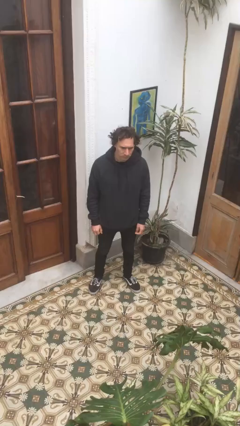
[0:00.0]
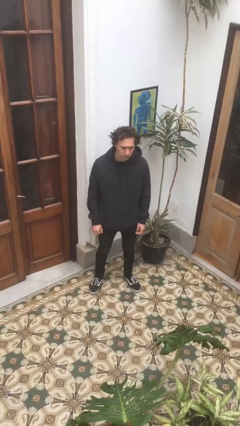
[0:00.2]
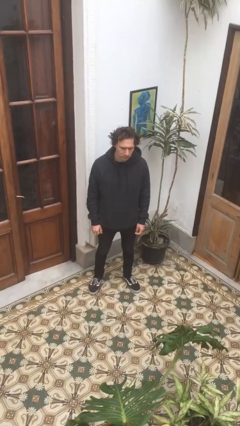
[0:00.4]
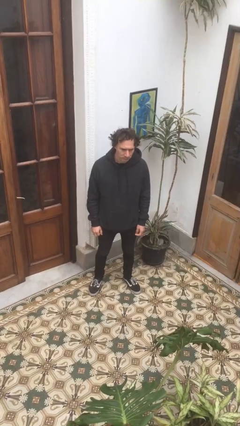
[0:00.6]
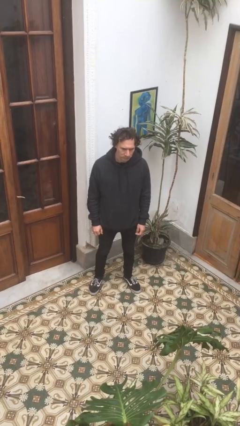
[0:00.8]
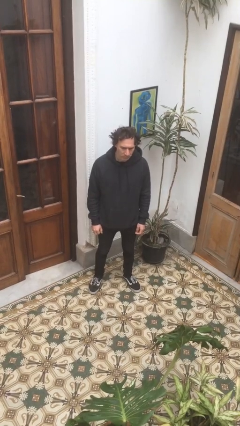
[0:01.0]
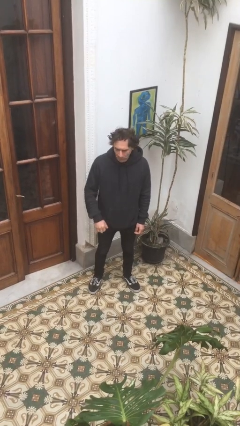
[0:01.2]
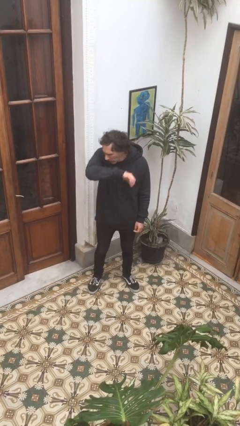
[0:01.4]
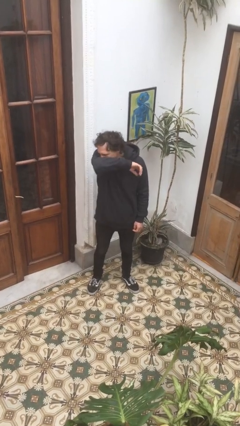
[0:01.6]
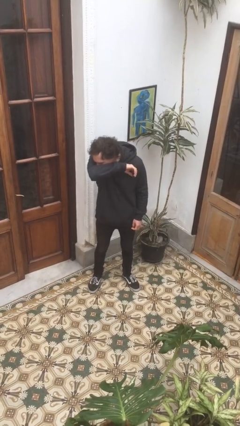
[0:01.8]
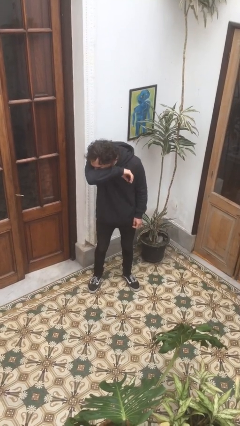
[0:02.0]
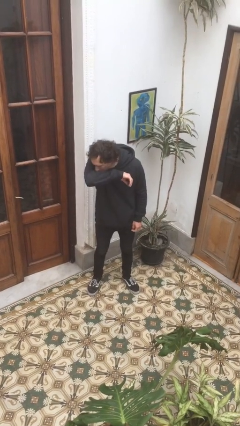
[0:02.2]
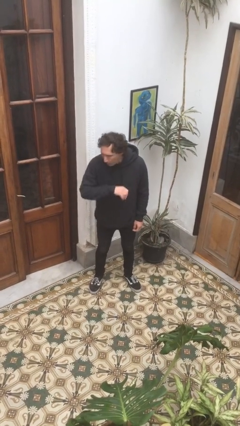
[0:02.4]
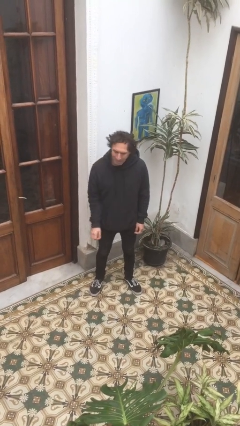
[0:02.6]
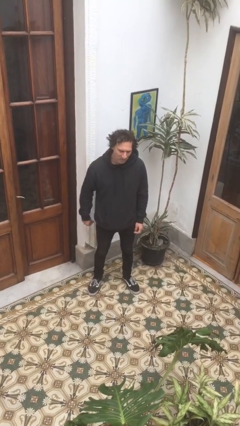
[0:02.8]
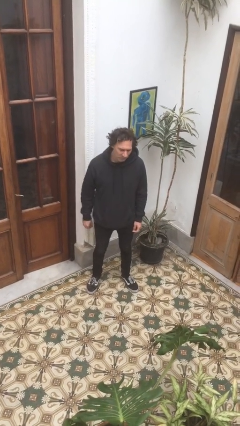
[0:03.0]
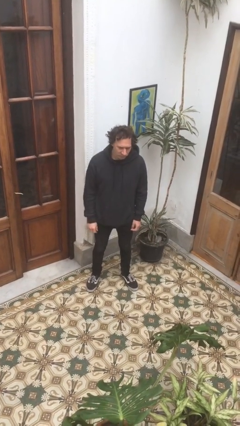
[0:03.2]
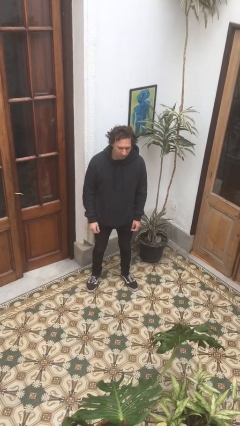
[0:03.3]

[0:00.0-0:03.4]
person sneezes into arm

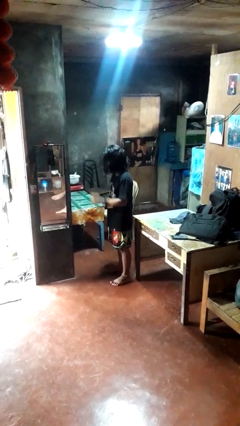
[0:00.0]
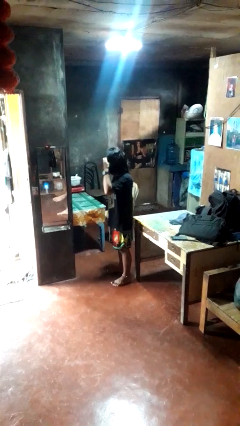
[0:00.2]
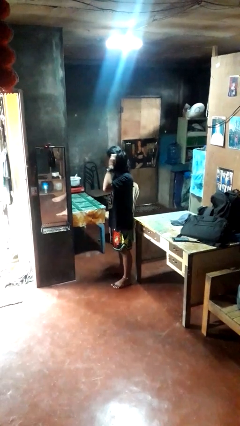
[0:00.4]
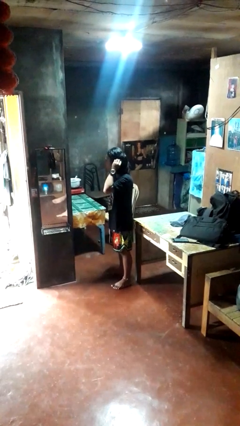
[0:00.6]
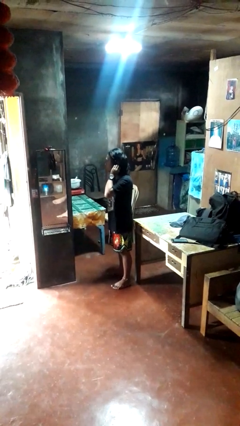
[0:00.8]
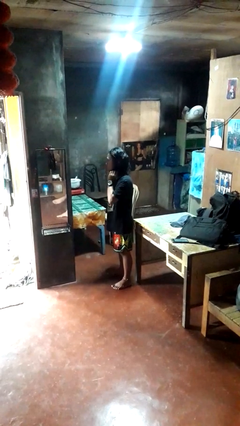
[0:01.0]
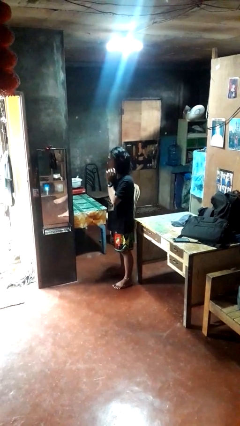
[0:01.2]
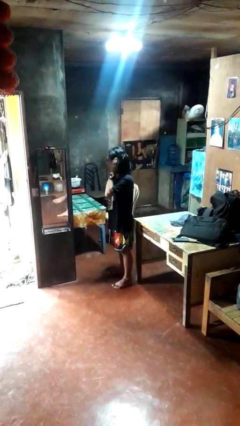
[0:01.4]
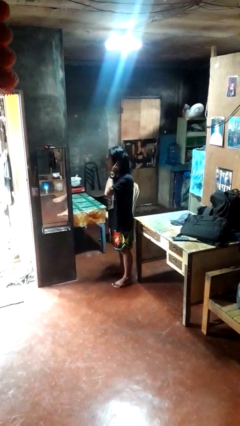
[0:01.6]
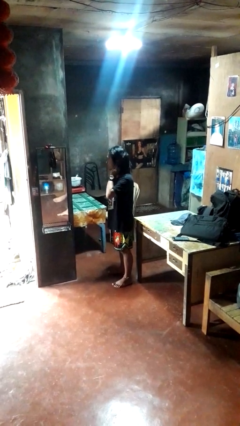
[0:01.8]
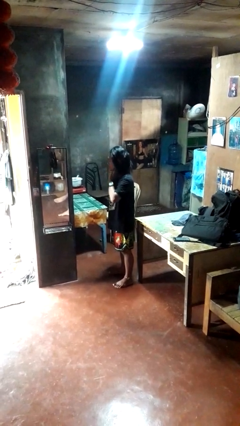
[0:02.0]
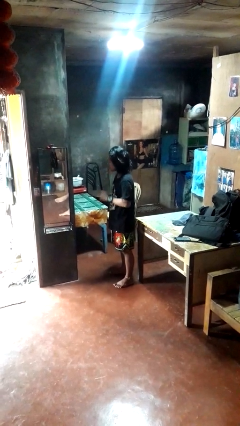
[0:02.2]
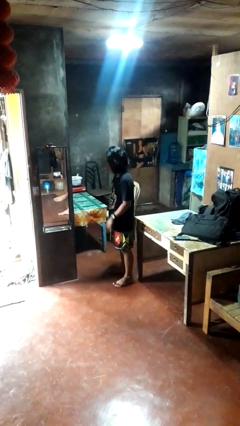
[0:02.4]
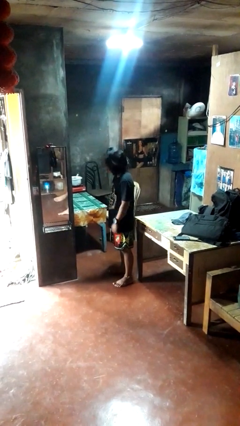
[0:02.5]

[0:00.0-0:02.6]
person strokes hair

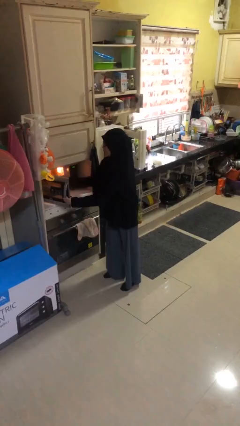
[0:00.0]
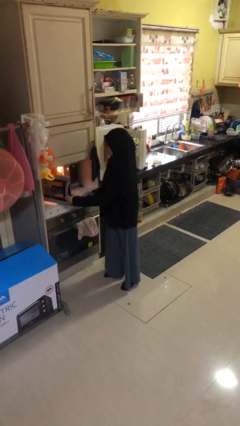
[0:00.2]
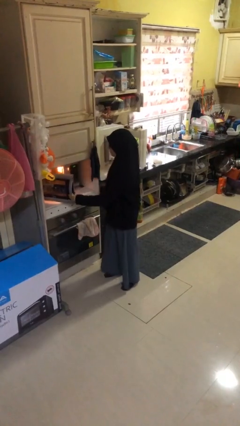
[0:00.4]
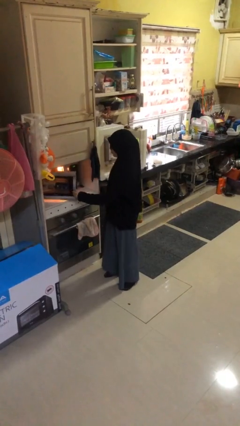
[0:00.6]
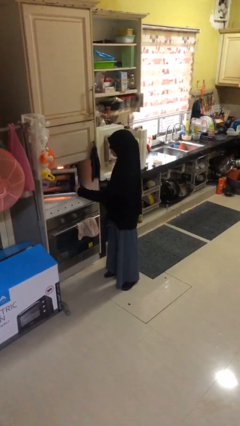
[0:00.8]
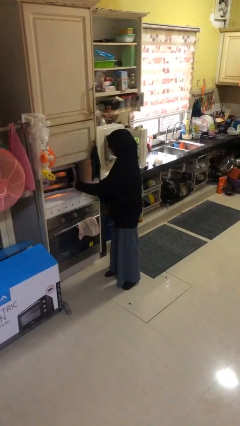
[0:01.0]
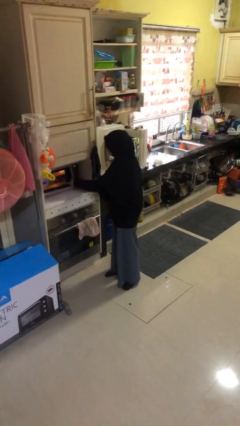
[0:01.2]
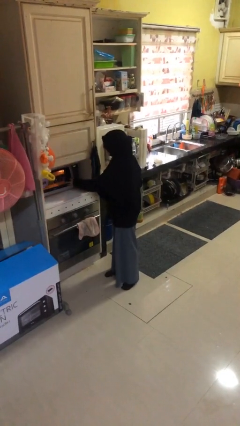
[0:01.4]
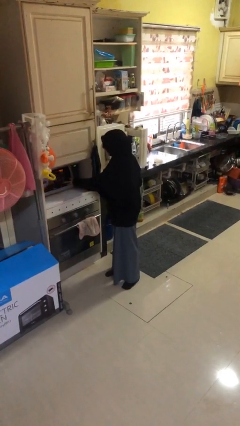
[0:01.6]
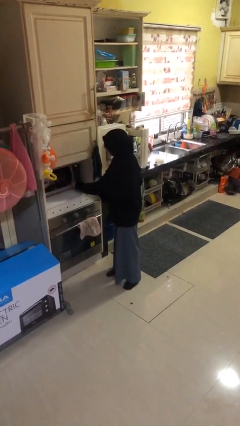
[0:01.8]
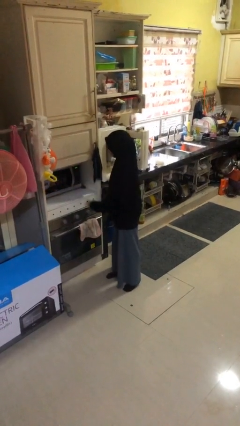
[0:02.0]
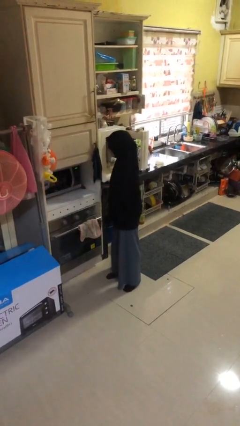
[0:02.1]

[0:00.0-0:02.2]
person closes microwave

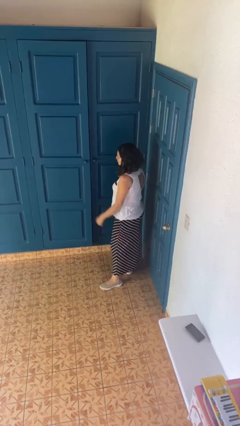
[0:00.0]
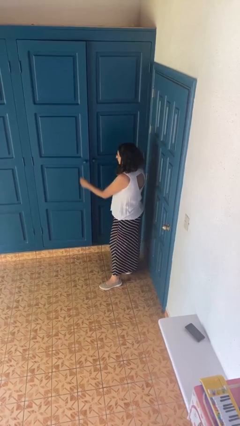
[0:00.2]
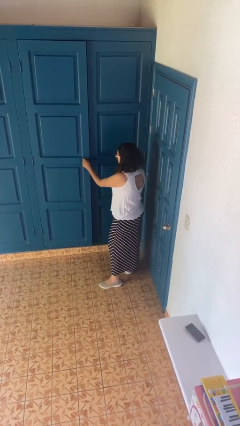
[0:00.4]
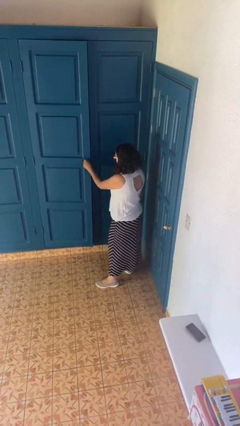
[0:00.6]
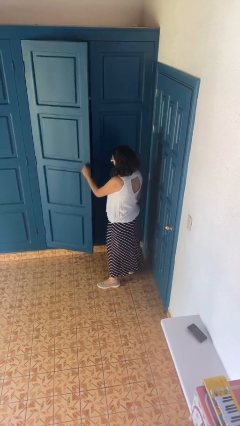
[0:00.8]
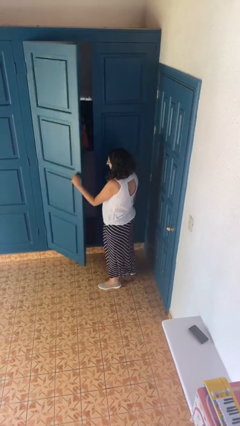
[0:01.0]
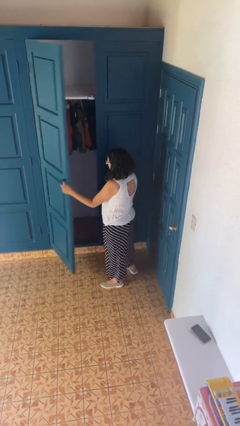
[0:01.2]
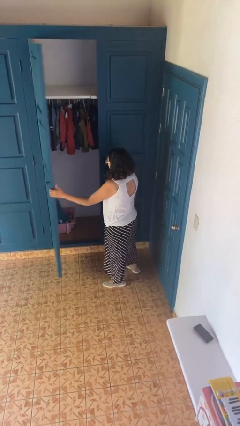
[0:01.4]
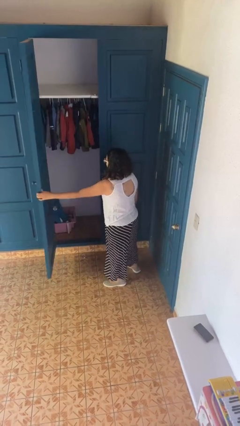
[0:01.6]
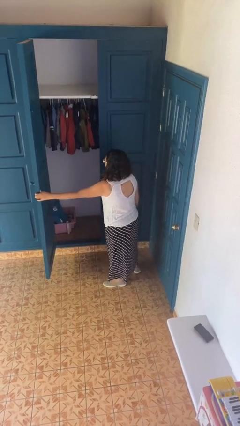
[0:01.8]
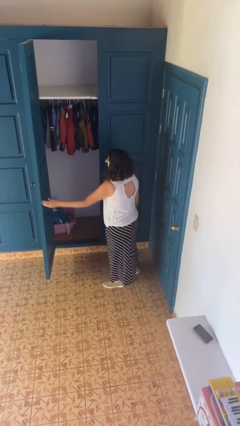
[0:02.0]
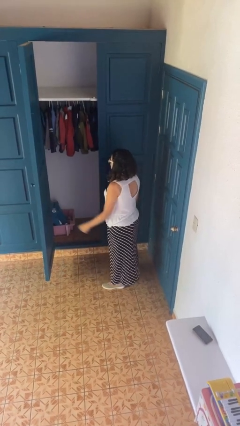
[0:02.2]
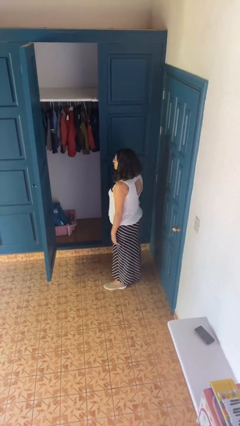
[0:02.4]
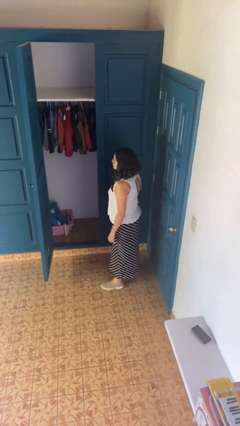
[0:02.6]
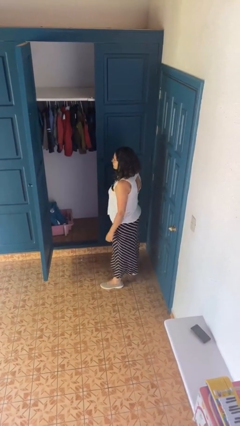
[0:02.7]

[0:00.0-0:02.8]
person opens closet door

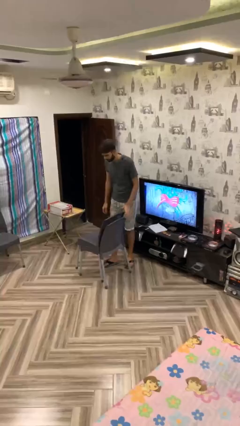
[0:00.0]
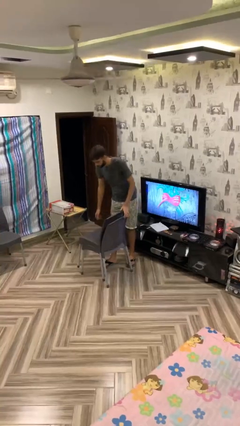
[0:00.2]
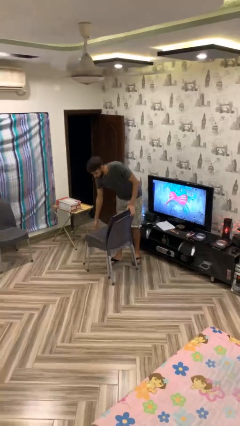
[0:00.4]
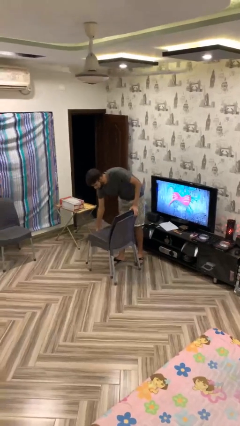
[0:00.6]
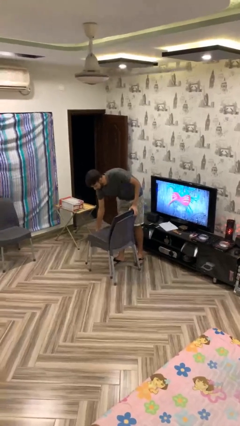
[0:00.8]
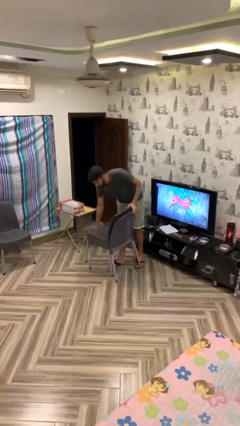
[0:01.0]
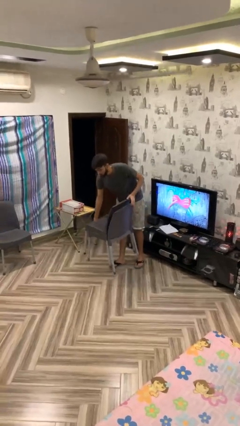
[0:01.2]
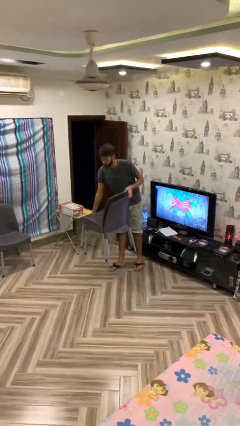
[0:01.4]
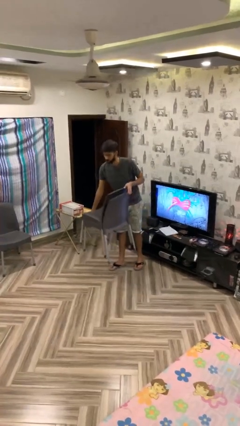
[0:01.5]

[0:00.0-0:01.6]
person picks up object from floor

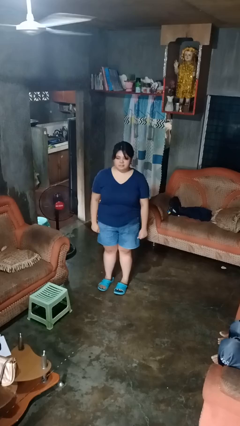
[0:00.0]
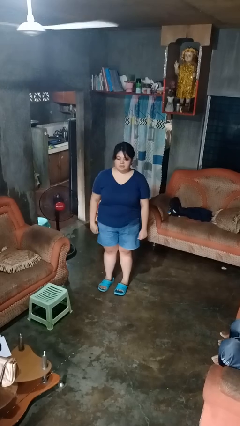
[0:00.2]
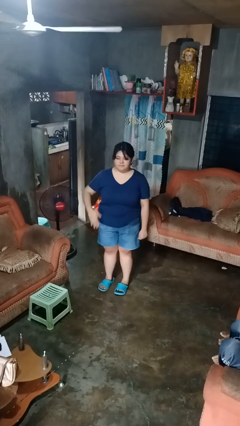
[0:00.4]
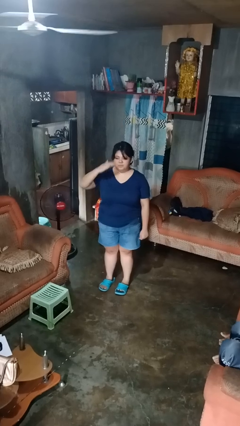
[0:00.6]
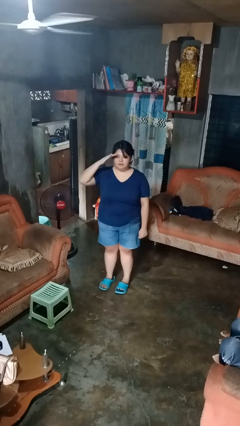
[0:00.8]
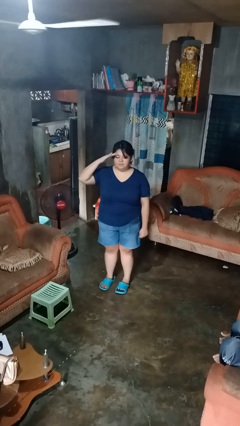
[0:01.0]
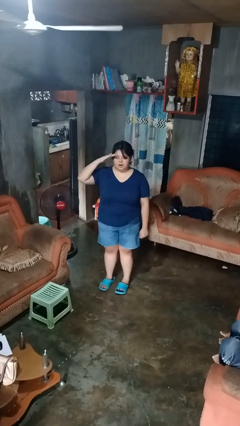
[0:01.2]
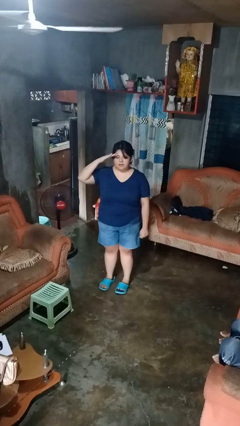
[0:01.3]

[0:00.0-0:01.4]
person salutes

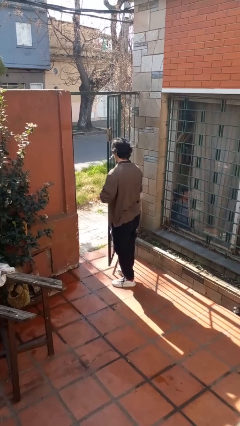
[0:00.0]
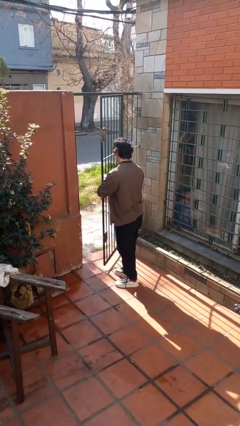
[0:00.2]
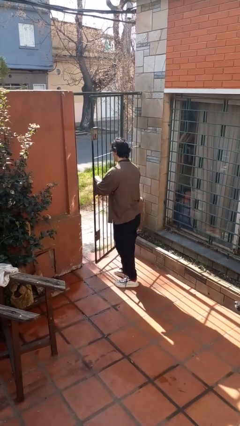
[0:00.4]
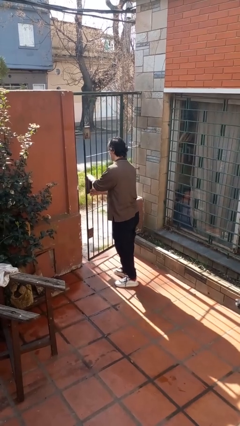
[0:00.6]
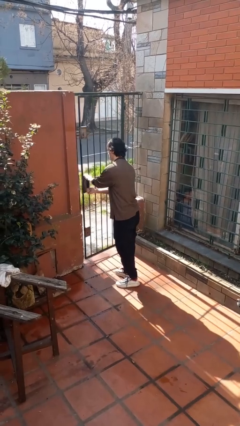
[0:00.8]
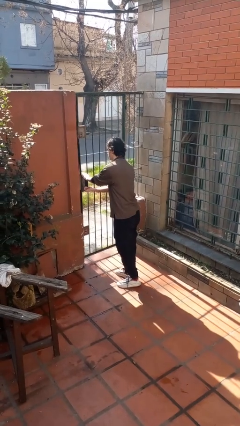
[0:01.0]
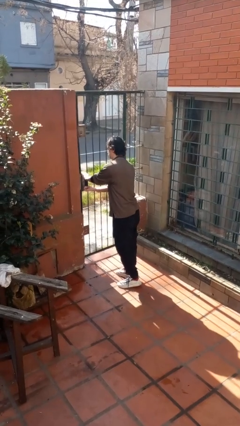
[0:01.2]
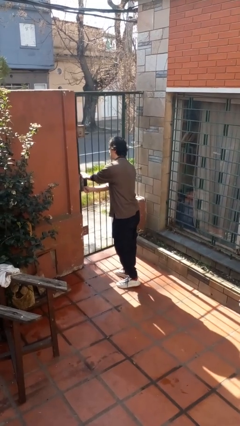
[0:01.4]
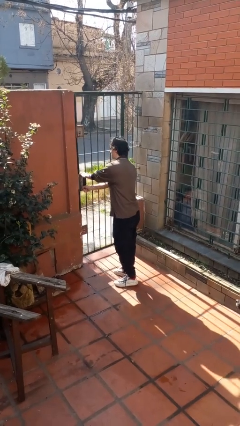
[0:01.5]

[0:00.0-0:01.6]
person closes gate

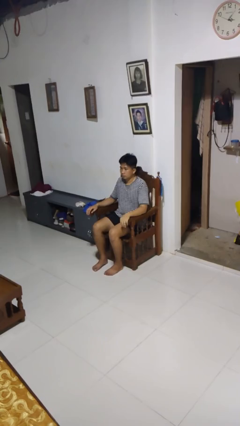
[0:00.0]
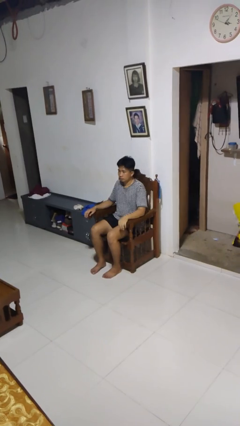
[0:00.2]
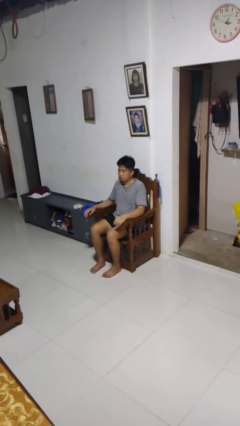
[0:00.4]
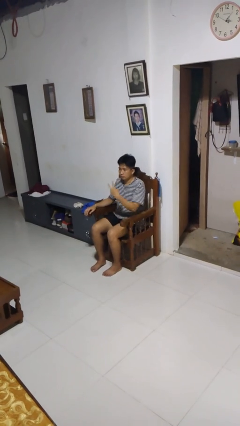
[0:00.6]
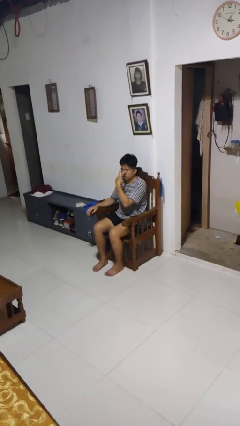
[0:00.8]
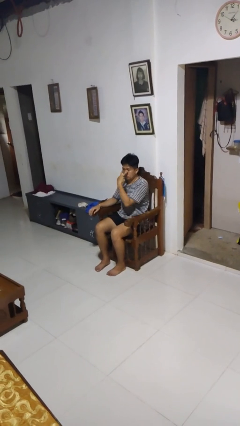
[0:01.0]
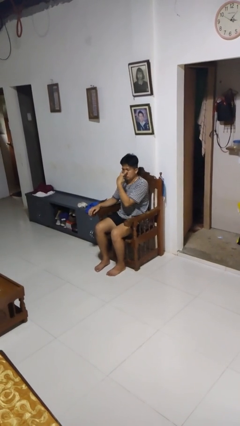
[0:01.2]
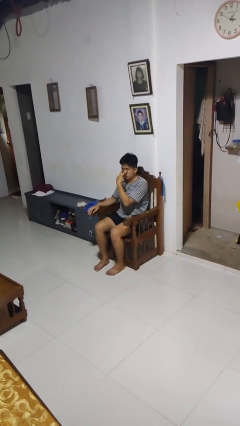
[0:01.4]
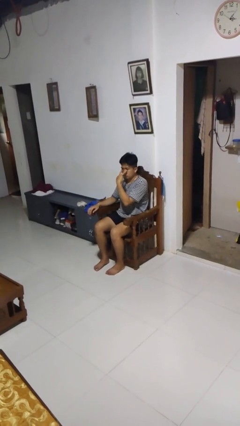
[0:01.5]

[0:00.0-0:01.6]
person gestures watch closely
